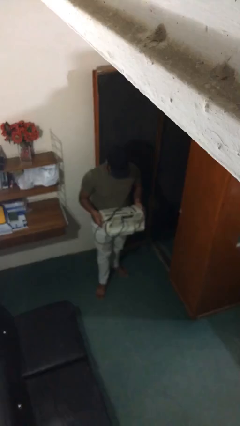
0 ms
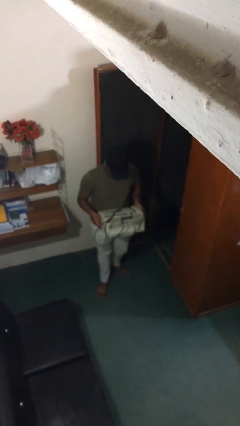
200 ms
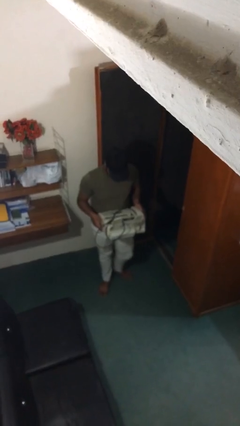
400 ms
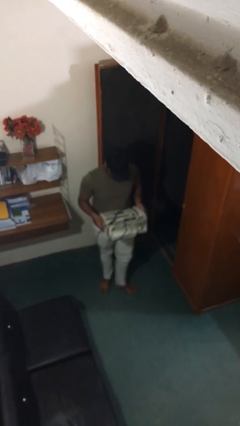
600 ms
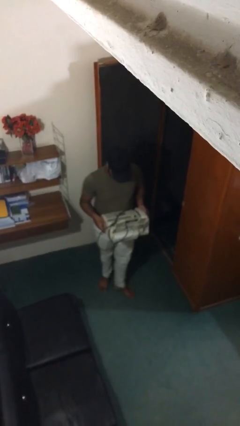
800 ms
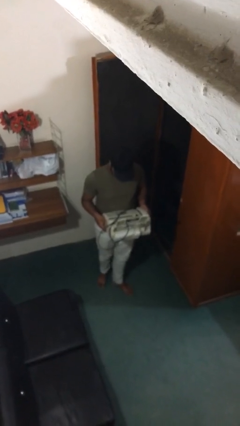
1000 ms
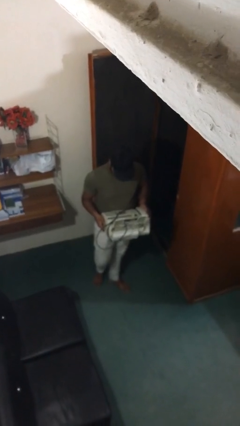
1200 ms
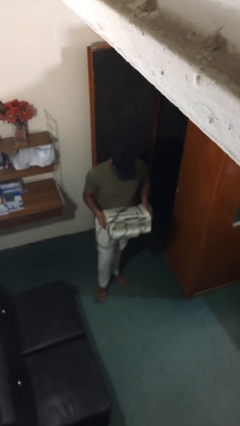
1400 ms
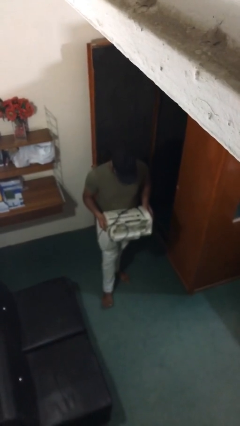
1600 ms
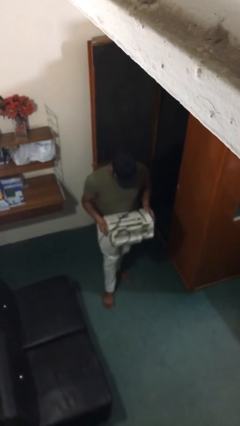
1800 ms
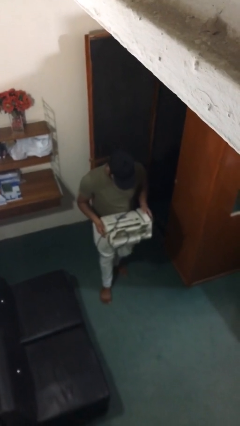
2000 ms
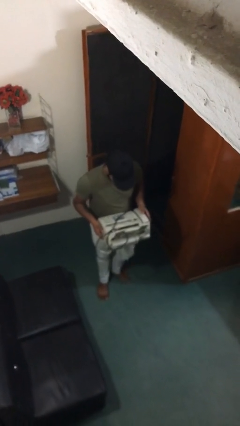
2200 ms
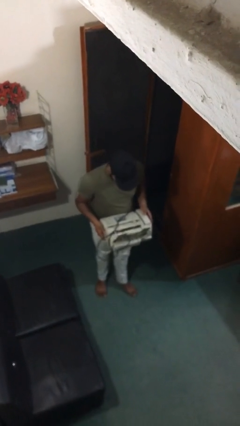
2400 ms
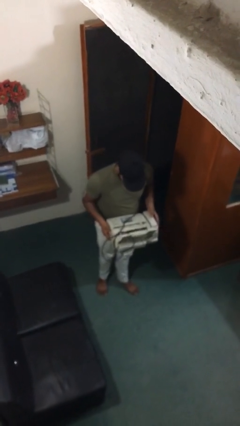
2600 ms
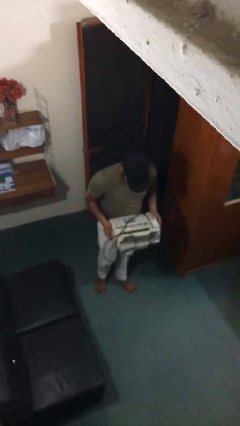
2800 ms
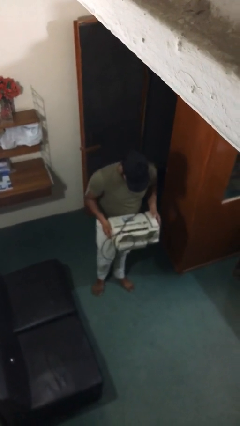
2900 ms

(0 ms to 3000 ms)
person carries heavy object

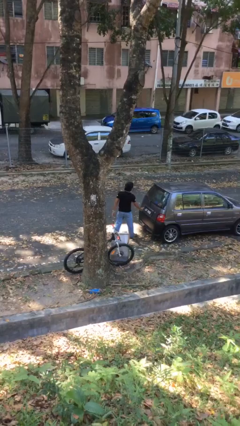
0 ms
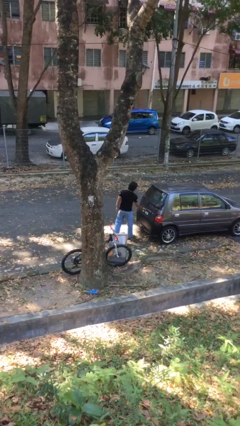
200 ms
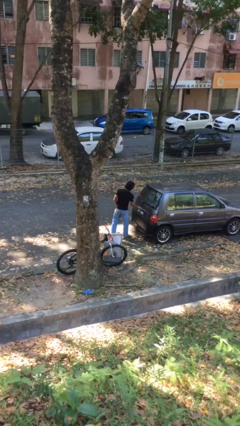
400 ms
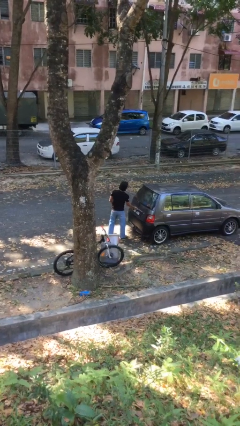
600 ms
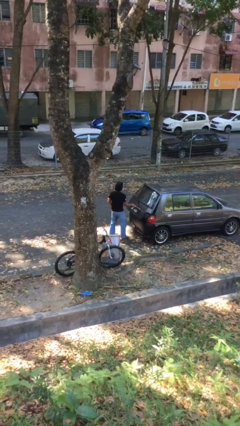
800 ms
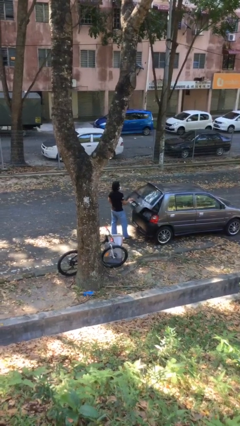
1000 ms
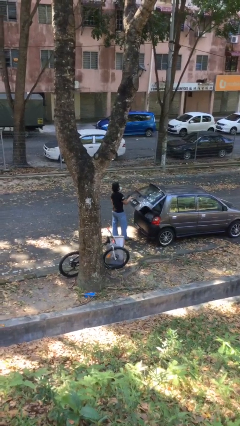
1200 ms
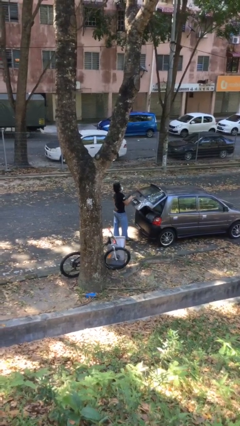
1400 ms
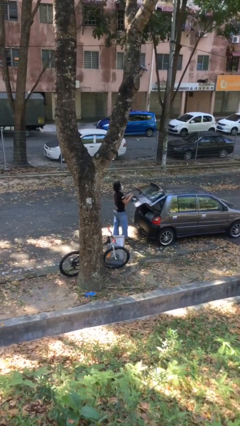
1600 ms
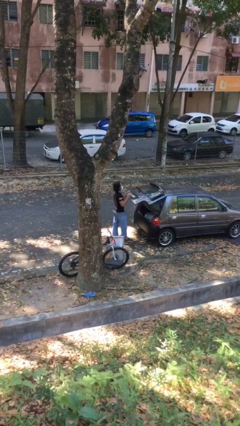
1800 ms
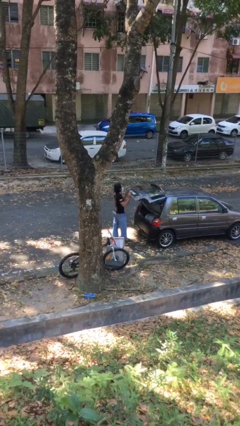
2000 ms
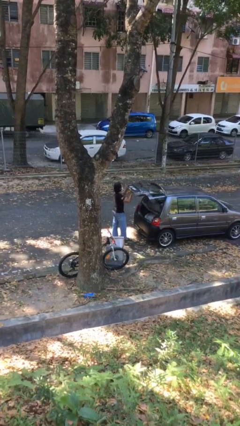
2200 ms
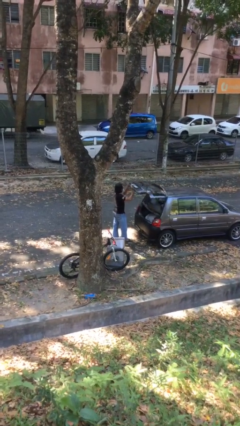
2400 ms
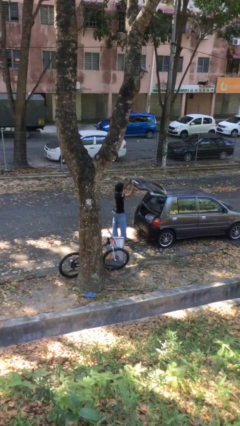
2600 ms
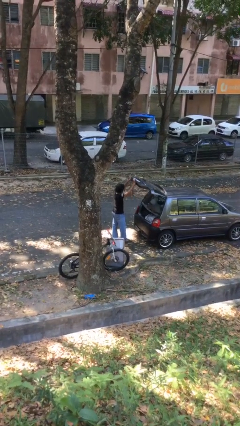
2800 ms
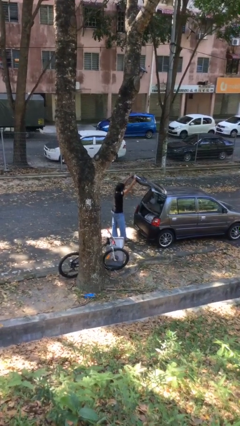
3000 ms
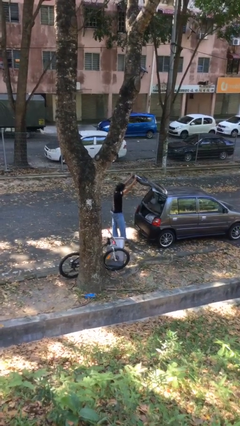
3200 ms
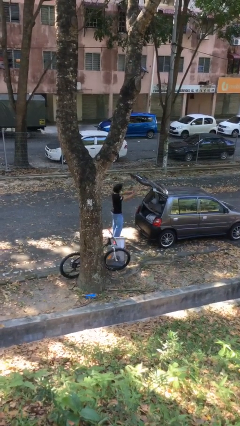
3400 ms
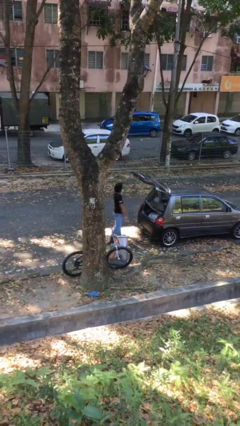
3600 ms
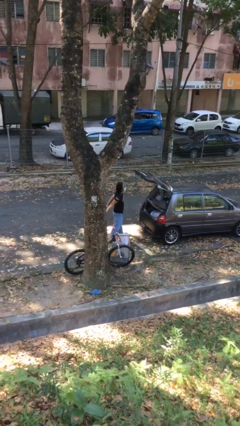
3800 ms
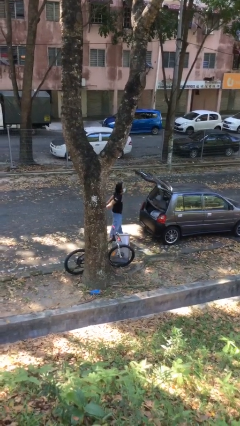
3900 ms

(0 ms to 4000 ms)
person opens car trunk

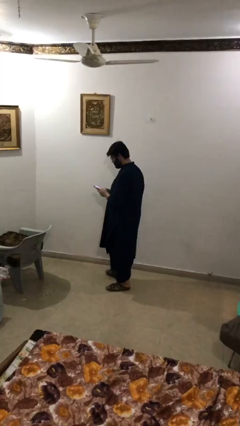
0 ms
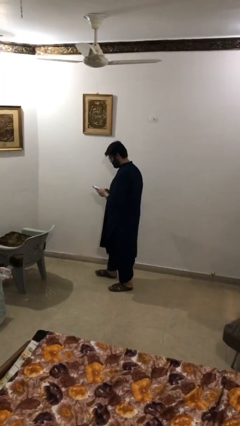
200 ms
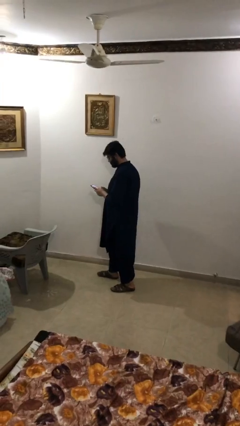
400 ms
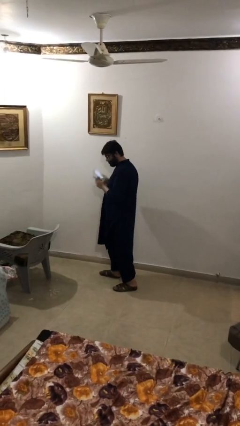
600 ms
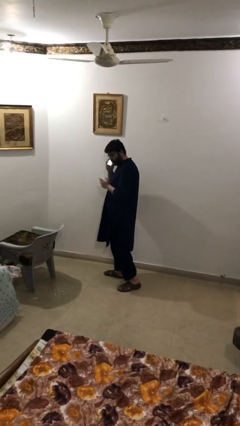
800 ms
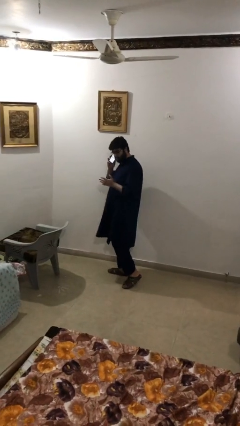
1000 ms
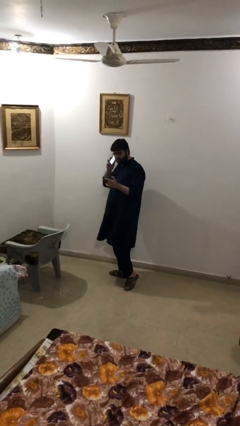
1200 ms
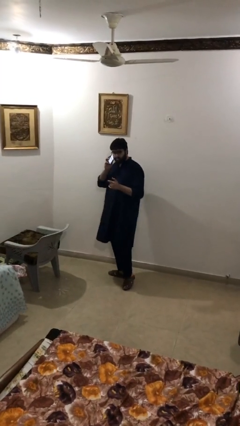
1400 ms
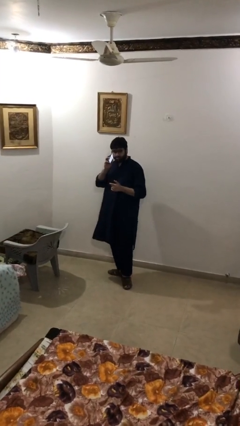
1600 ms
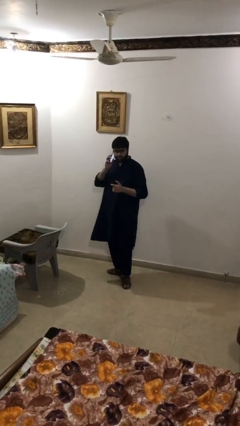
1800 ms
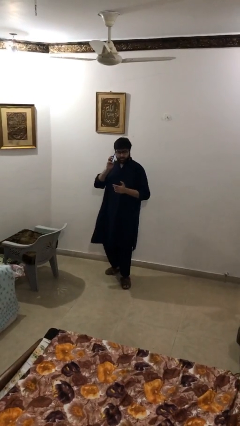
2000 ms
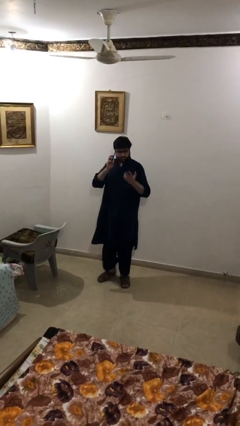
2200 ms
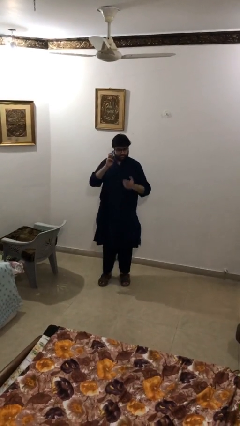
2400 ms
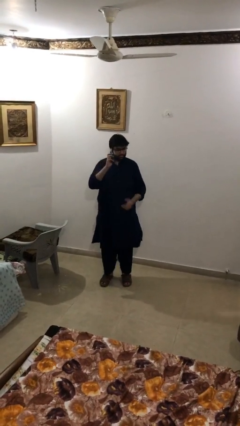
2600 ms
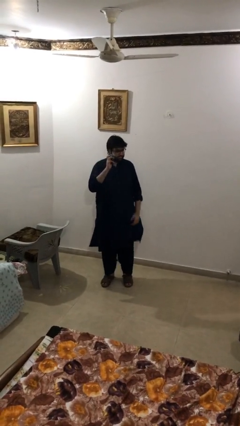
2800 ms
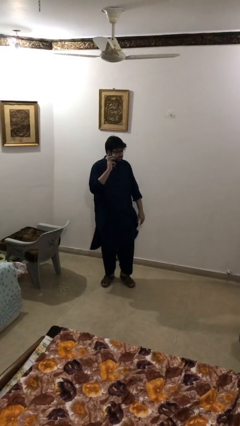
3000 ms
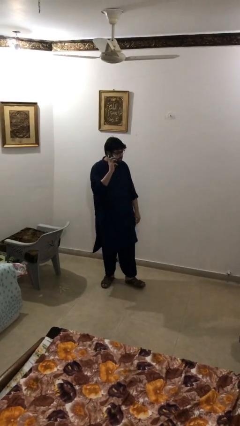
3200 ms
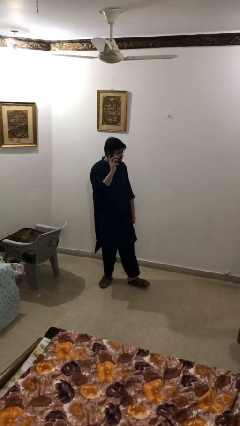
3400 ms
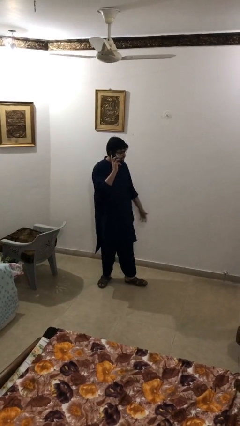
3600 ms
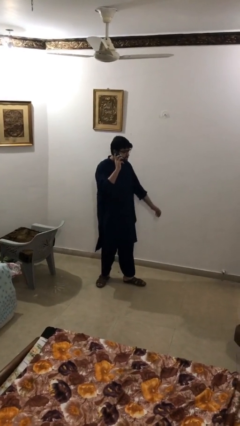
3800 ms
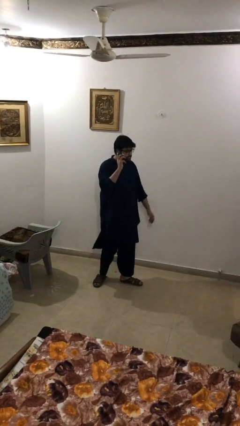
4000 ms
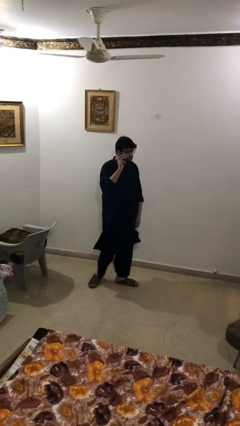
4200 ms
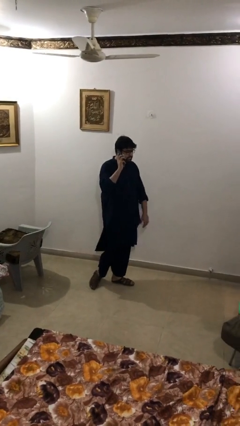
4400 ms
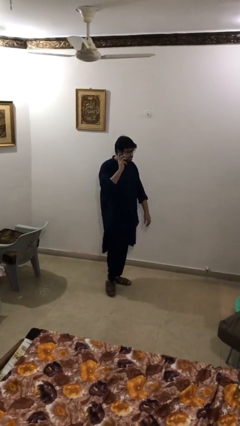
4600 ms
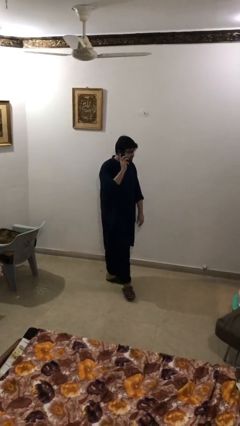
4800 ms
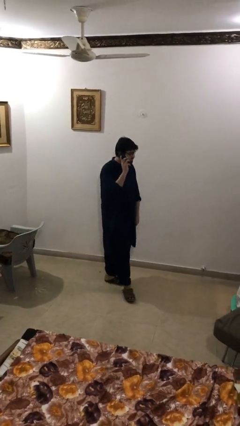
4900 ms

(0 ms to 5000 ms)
person talks on phone

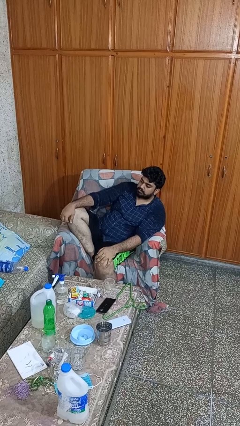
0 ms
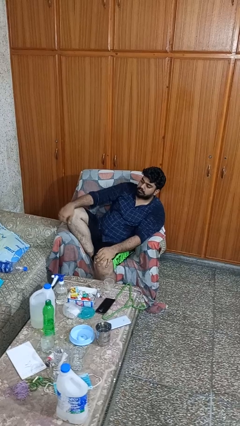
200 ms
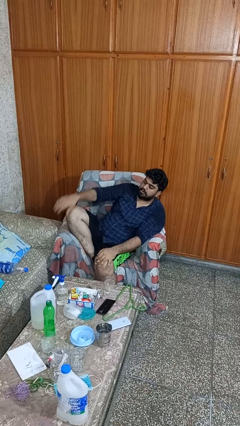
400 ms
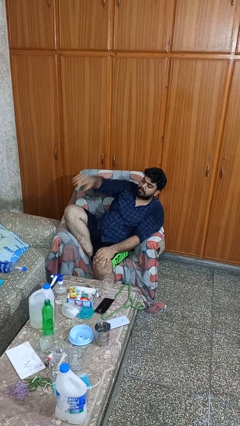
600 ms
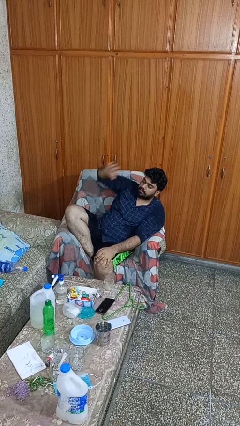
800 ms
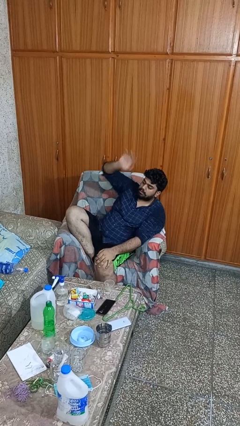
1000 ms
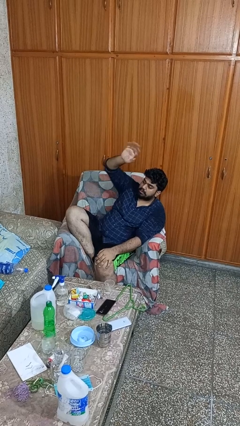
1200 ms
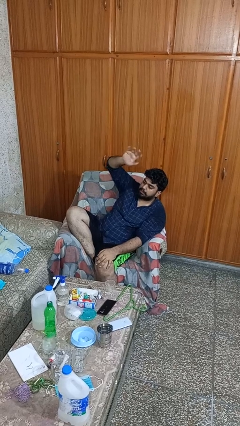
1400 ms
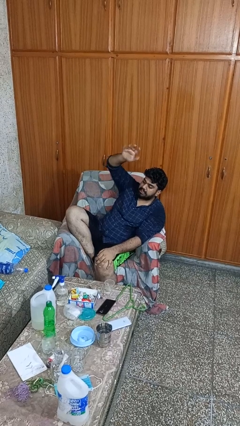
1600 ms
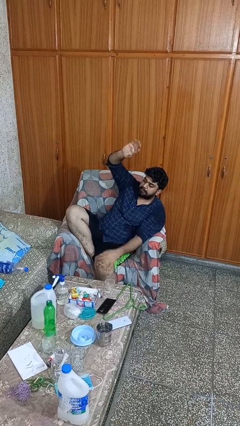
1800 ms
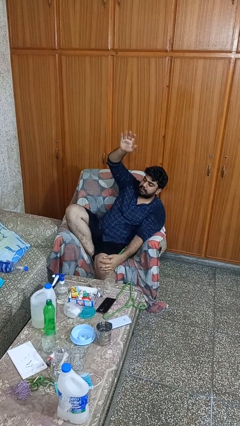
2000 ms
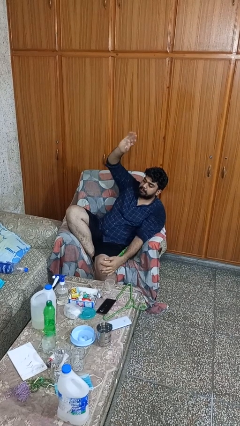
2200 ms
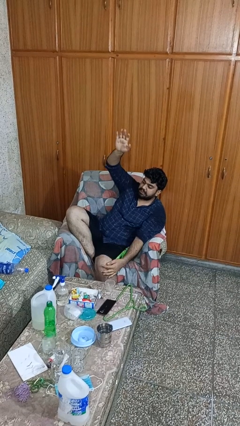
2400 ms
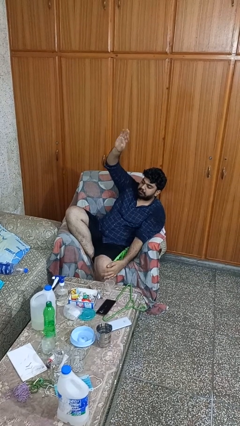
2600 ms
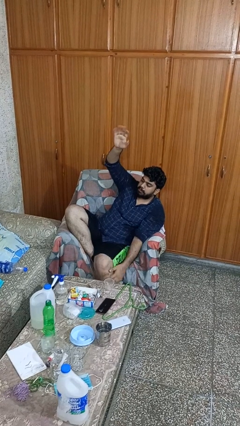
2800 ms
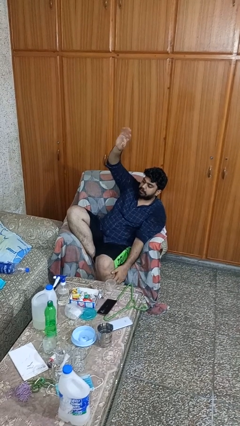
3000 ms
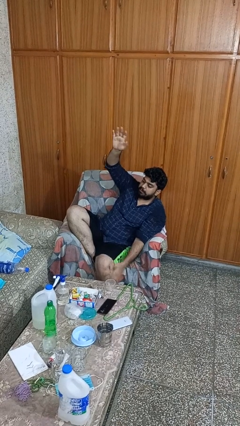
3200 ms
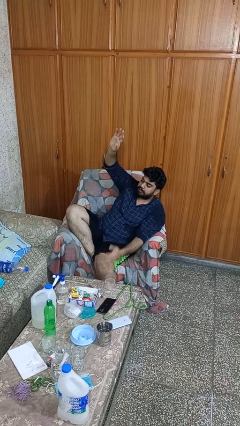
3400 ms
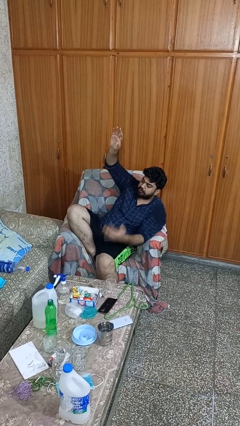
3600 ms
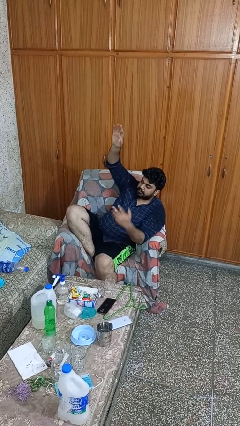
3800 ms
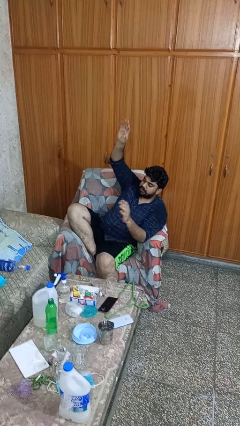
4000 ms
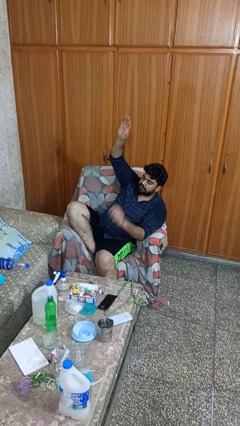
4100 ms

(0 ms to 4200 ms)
person waves at person

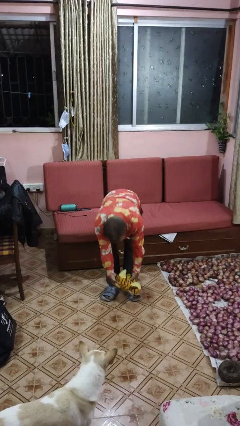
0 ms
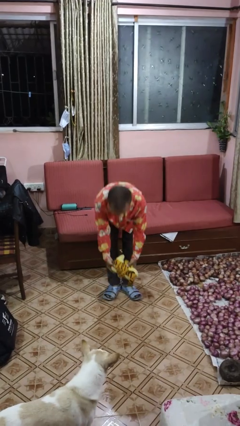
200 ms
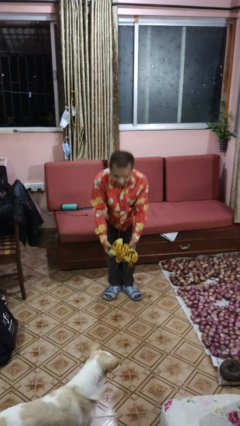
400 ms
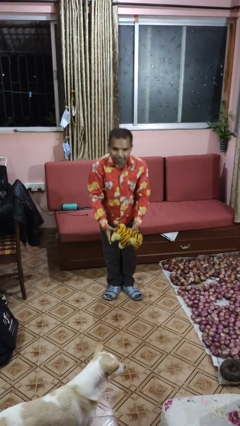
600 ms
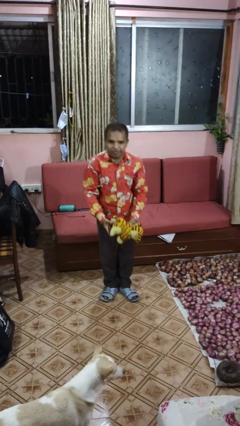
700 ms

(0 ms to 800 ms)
person catches dropped object

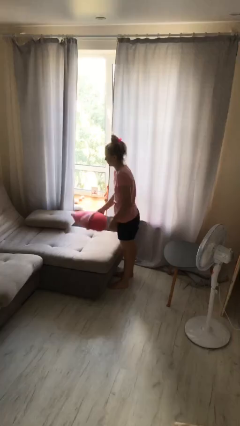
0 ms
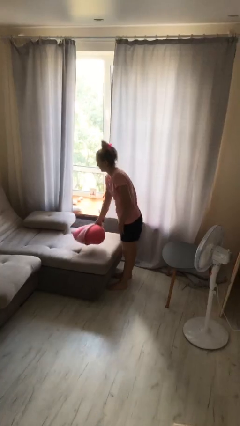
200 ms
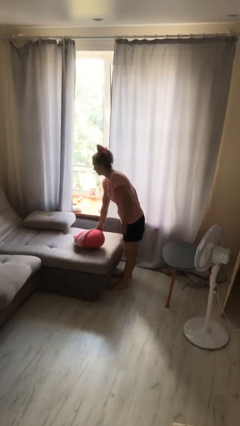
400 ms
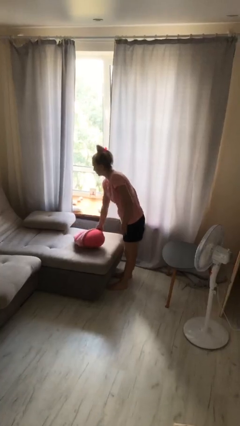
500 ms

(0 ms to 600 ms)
person puts down object on couch
